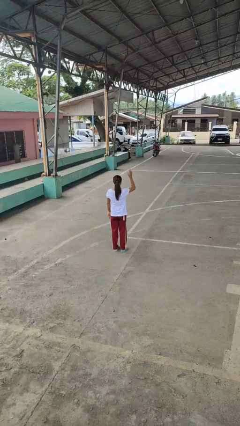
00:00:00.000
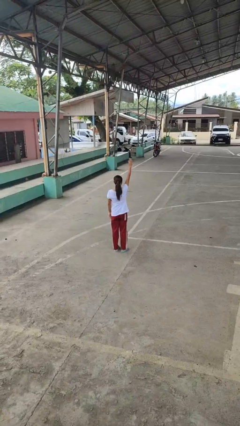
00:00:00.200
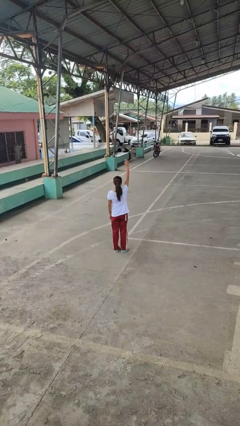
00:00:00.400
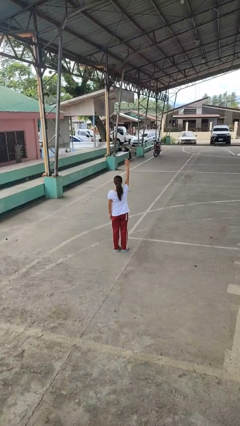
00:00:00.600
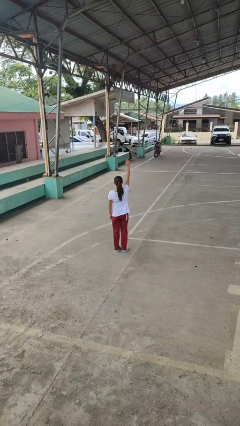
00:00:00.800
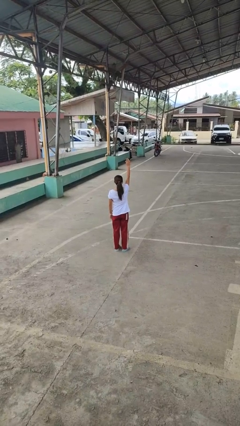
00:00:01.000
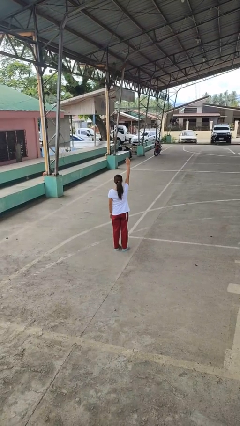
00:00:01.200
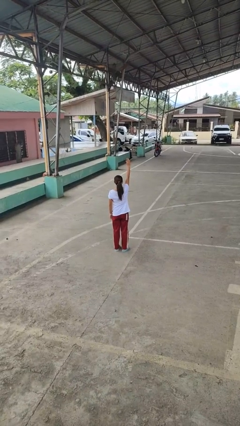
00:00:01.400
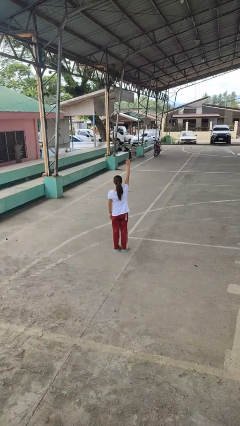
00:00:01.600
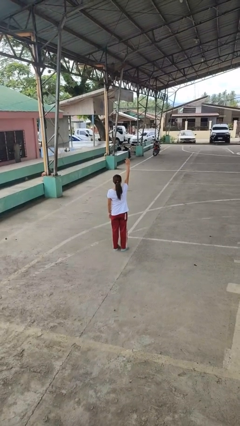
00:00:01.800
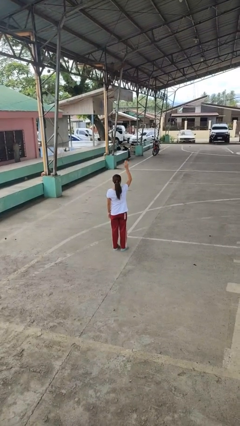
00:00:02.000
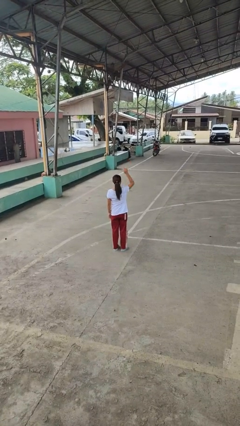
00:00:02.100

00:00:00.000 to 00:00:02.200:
person gestures raise hand

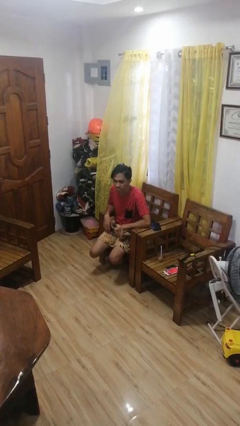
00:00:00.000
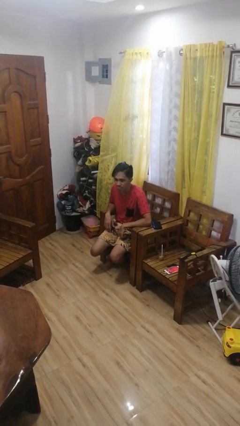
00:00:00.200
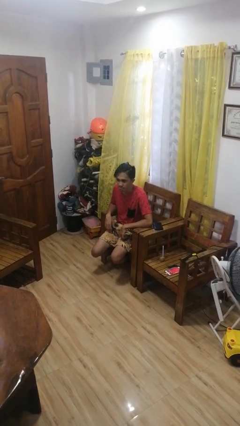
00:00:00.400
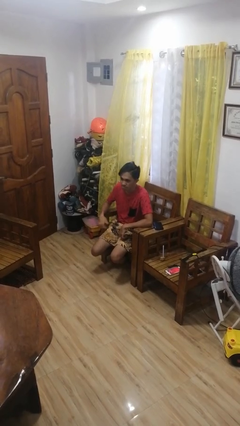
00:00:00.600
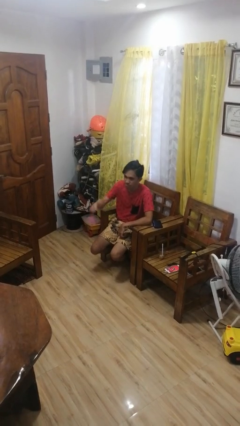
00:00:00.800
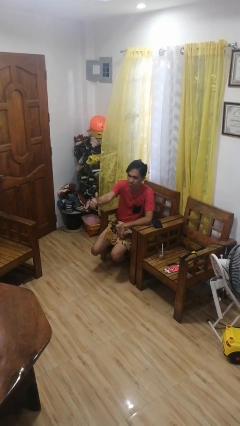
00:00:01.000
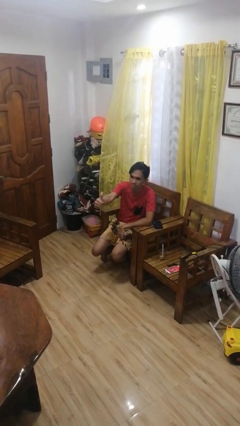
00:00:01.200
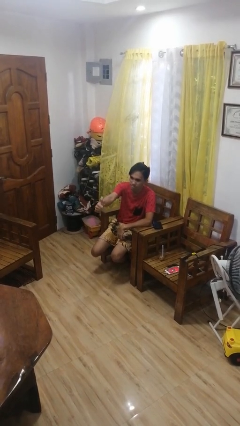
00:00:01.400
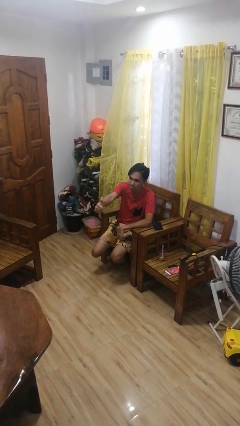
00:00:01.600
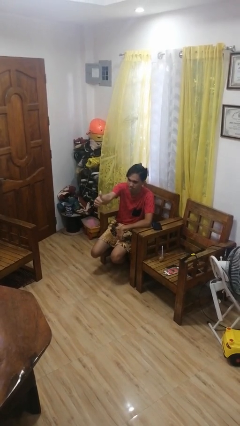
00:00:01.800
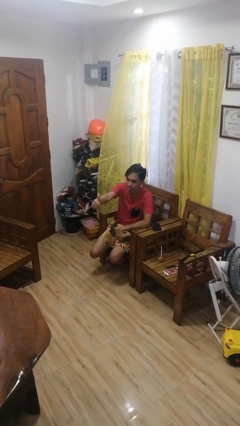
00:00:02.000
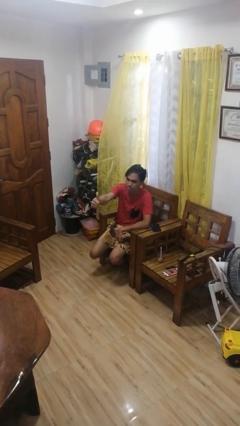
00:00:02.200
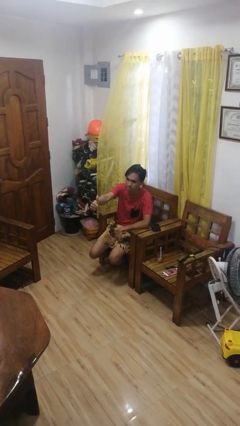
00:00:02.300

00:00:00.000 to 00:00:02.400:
person gestures thumbs up

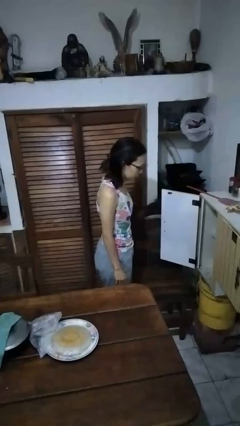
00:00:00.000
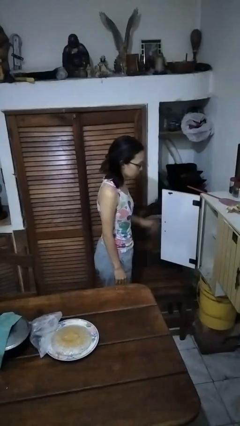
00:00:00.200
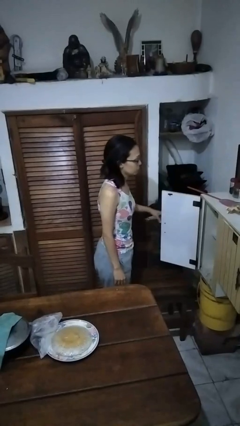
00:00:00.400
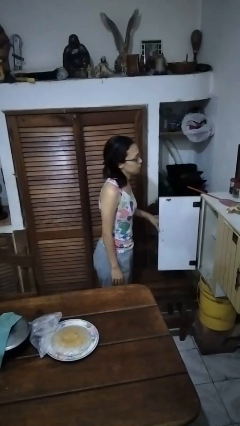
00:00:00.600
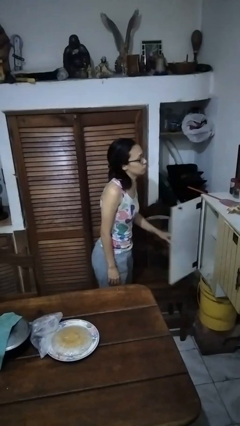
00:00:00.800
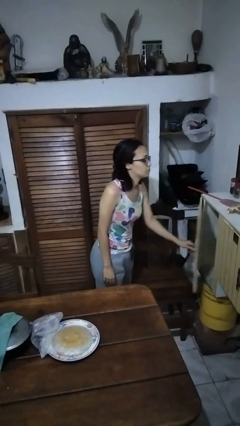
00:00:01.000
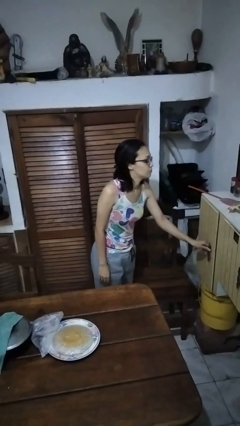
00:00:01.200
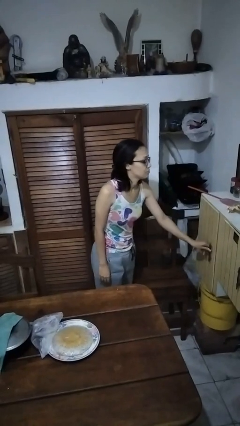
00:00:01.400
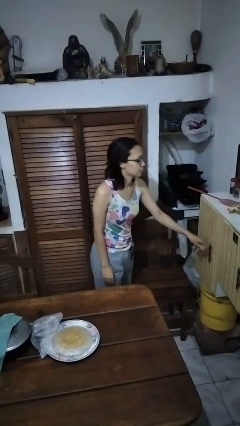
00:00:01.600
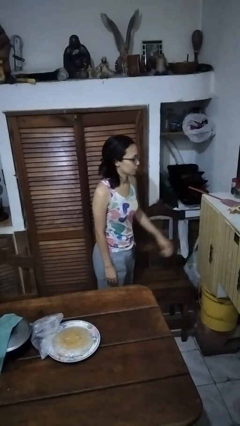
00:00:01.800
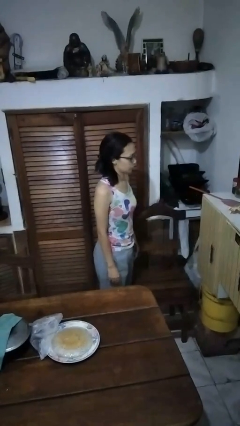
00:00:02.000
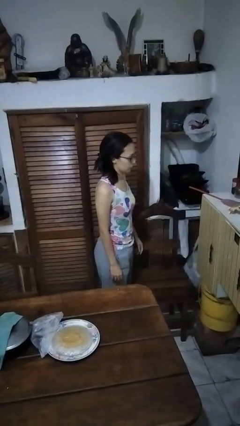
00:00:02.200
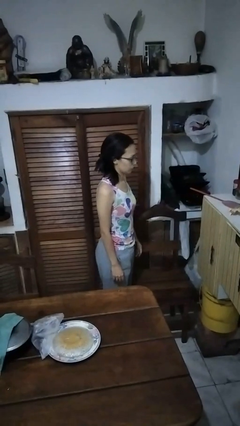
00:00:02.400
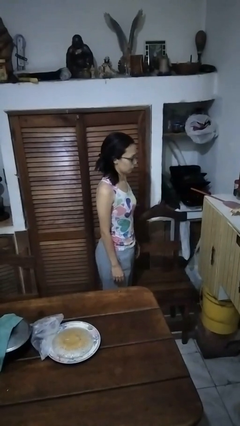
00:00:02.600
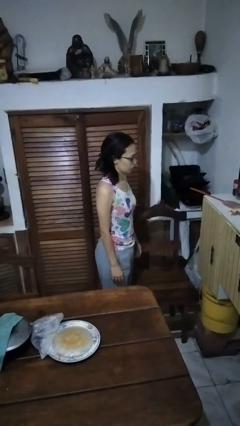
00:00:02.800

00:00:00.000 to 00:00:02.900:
person closes cabinet

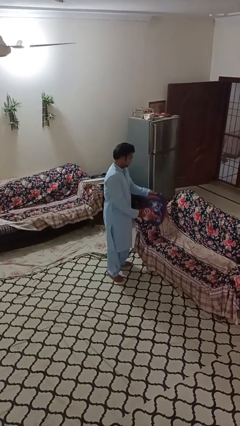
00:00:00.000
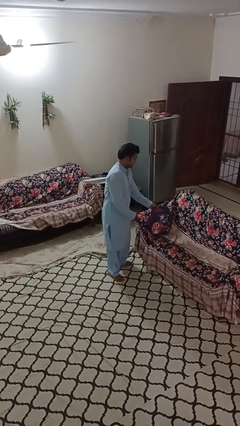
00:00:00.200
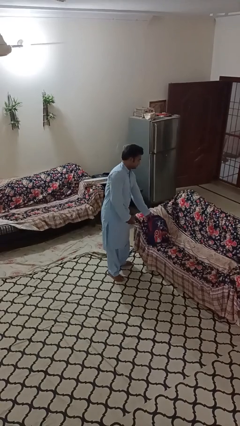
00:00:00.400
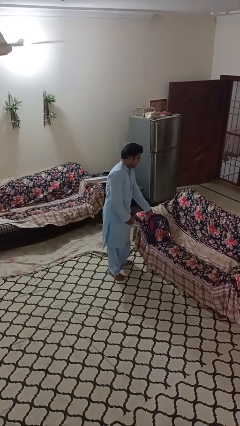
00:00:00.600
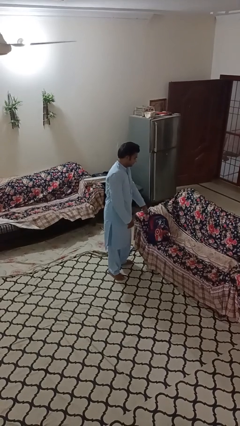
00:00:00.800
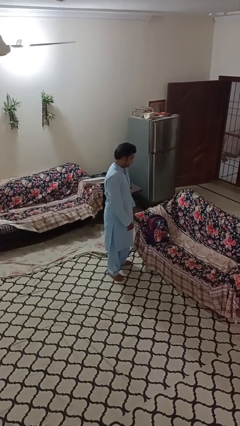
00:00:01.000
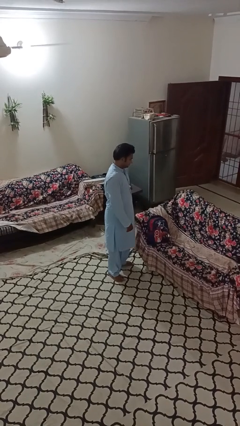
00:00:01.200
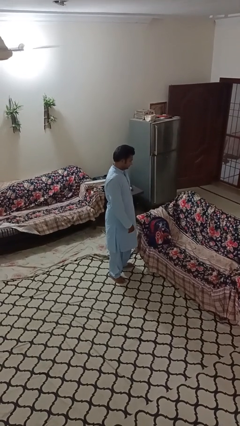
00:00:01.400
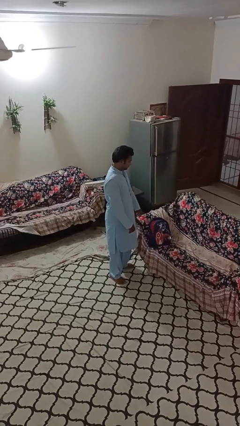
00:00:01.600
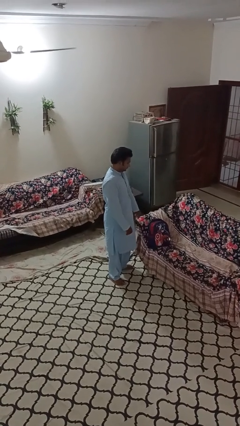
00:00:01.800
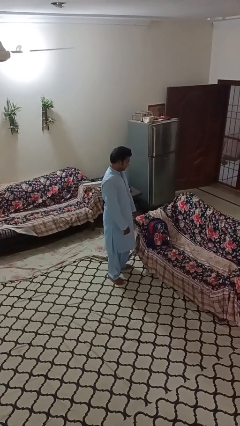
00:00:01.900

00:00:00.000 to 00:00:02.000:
person puts down object on couch

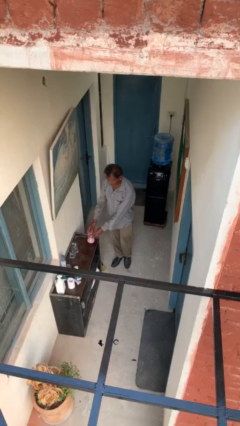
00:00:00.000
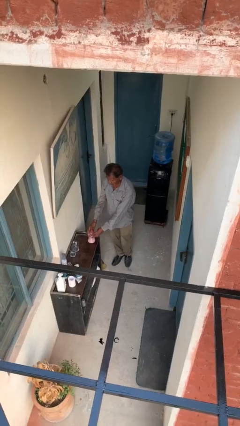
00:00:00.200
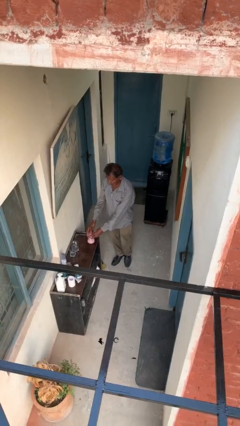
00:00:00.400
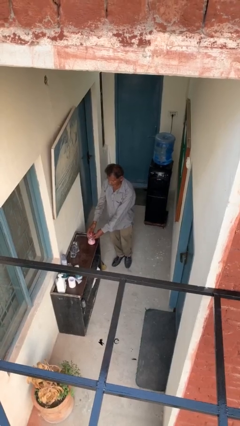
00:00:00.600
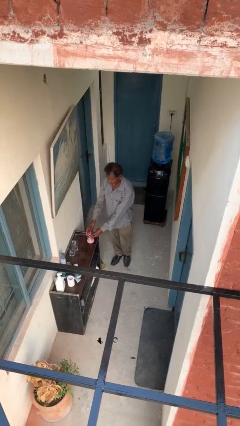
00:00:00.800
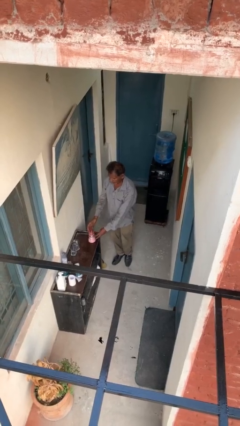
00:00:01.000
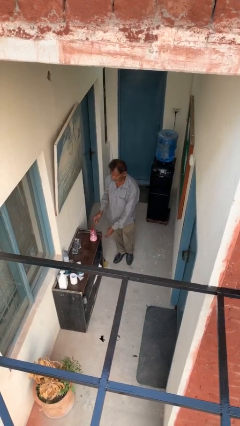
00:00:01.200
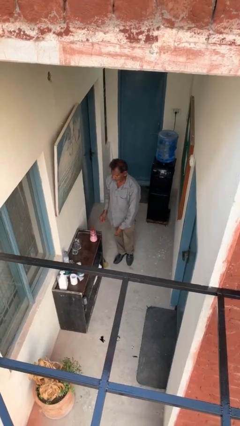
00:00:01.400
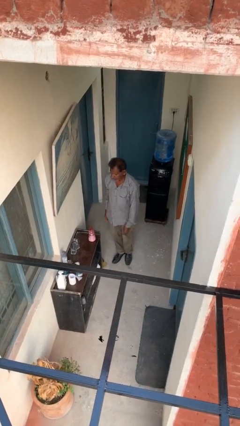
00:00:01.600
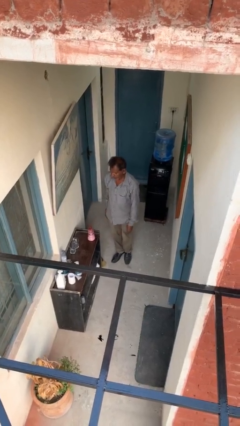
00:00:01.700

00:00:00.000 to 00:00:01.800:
person puts down object on table

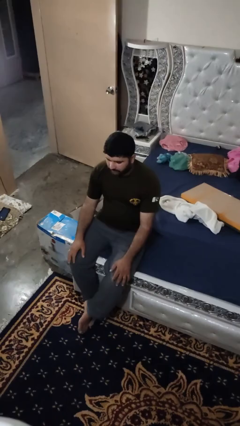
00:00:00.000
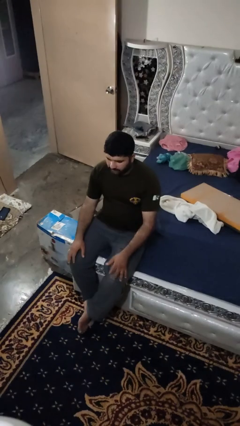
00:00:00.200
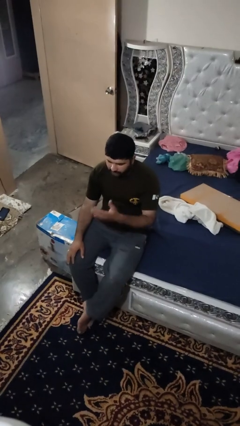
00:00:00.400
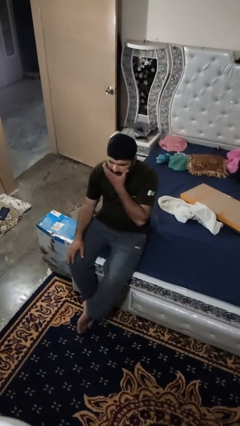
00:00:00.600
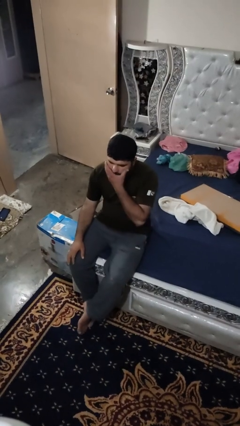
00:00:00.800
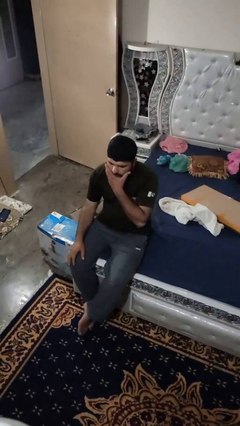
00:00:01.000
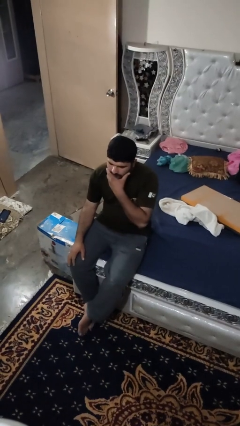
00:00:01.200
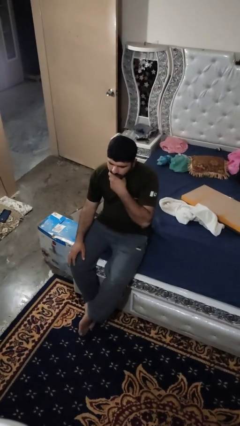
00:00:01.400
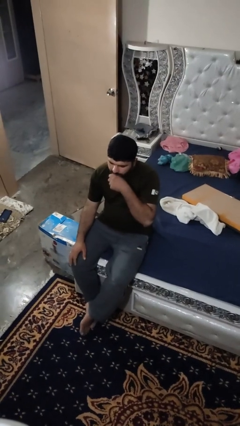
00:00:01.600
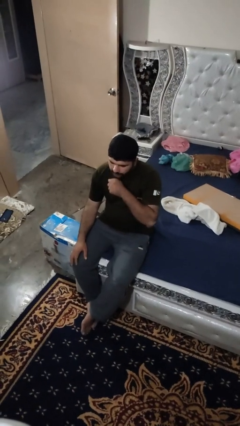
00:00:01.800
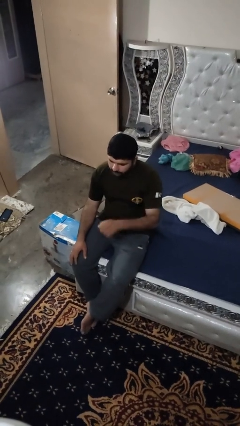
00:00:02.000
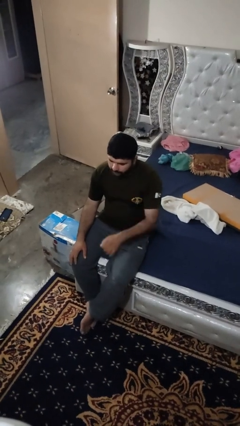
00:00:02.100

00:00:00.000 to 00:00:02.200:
person strokes chin

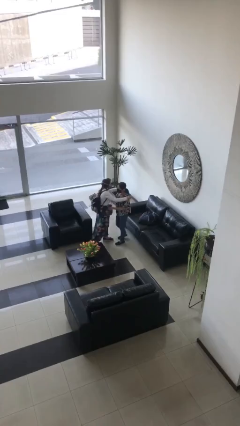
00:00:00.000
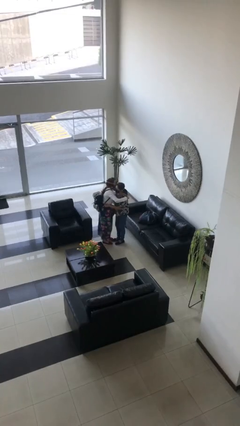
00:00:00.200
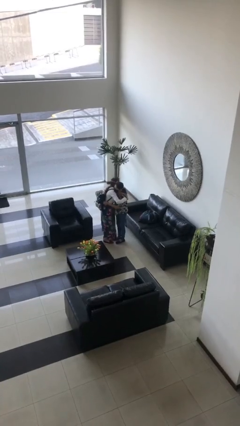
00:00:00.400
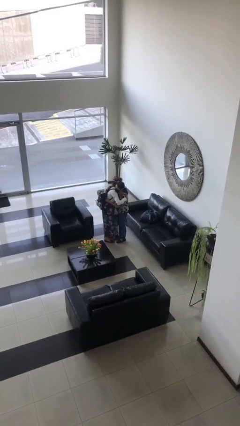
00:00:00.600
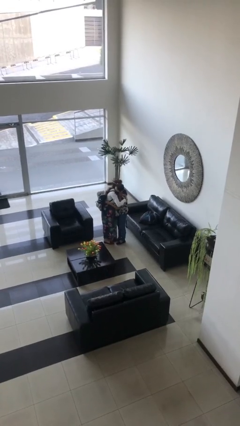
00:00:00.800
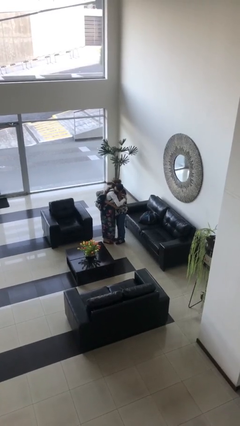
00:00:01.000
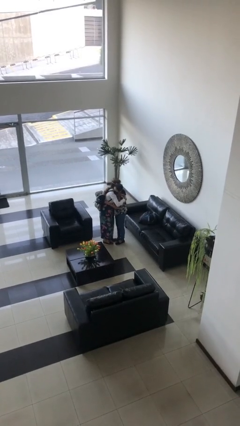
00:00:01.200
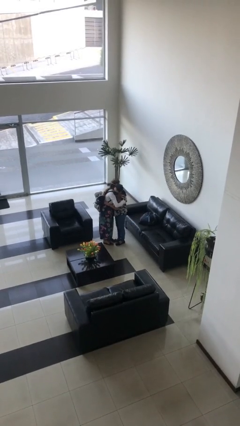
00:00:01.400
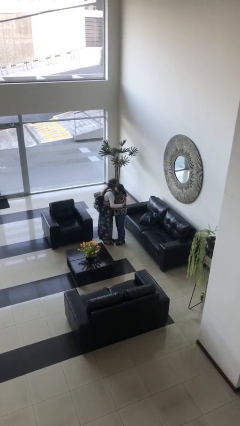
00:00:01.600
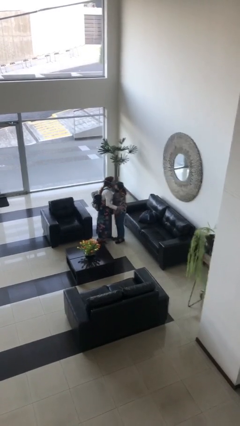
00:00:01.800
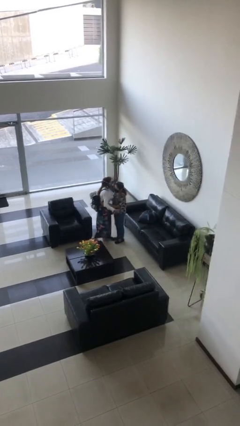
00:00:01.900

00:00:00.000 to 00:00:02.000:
person embraces person

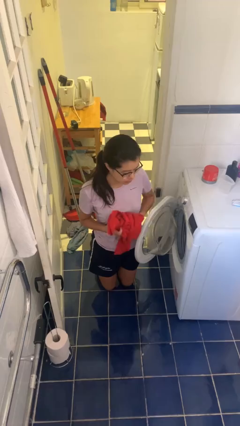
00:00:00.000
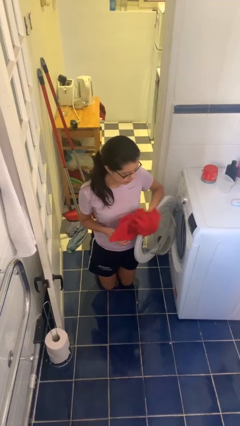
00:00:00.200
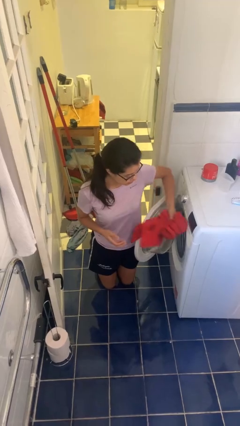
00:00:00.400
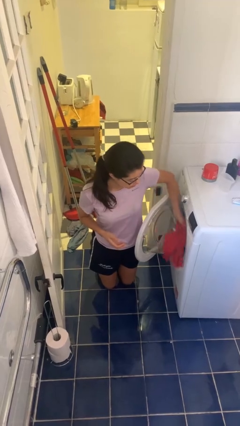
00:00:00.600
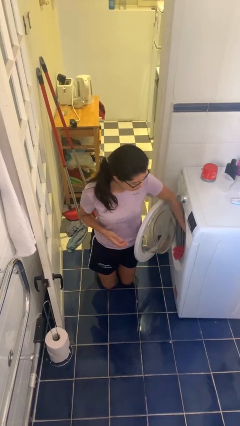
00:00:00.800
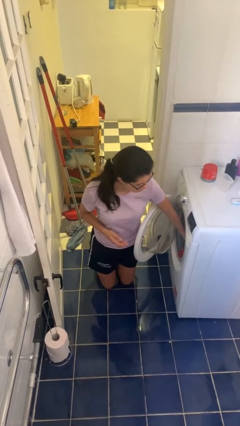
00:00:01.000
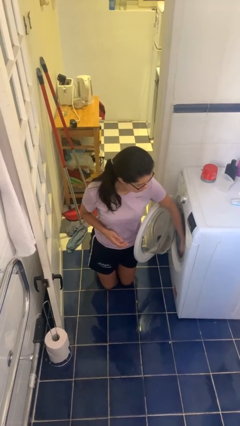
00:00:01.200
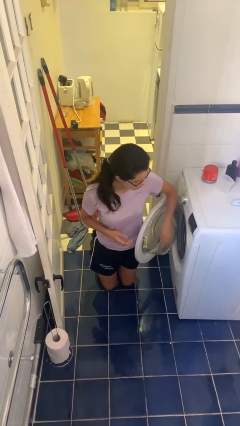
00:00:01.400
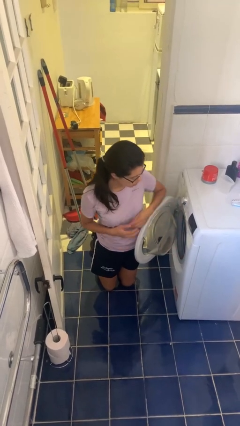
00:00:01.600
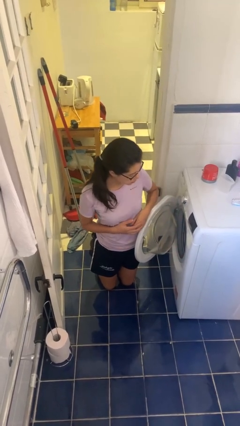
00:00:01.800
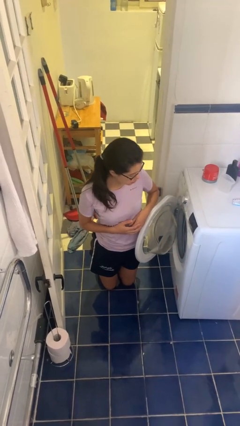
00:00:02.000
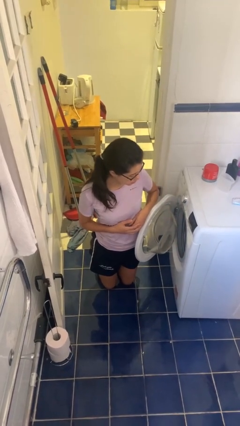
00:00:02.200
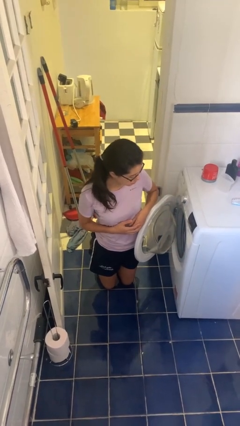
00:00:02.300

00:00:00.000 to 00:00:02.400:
person loads dryer
